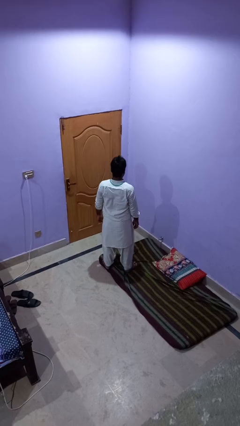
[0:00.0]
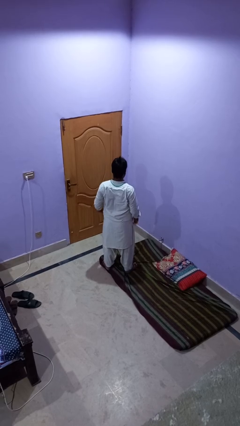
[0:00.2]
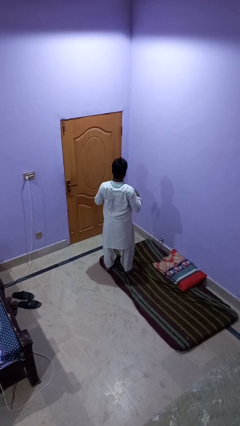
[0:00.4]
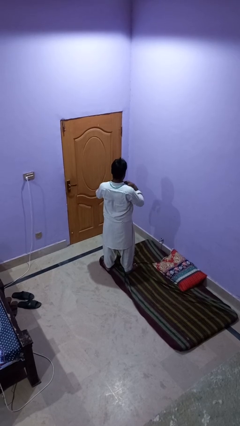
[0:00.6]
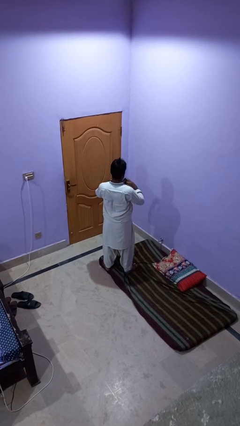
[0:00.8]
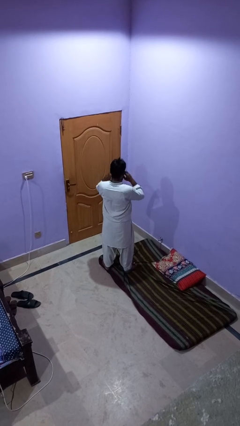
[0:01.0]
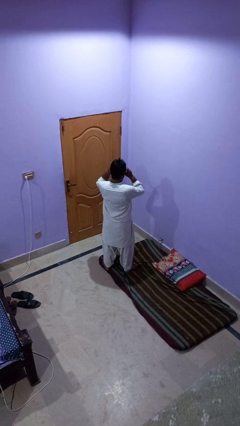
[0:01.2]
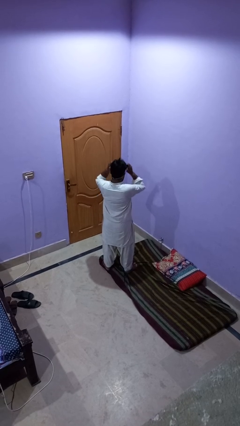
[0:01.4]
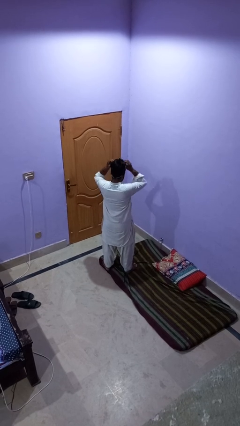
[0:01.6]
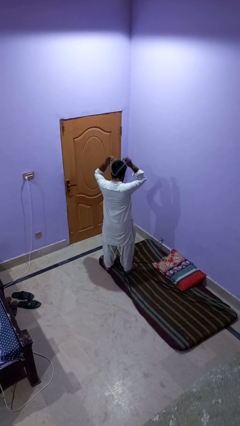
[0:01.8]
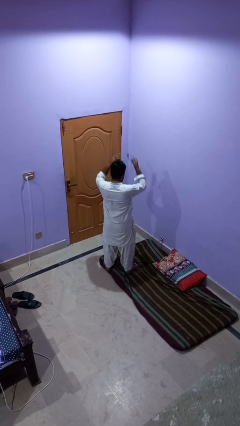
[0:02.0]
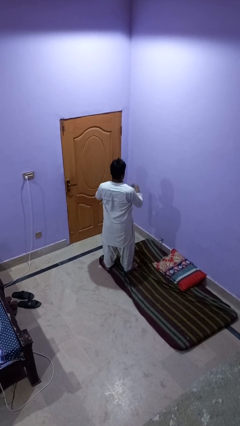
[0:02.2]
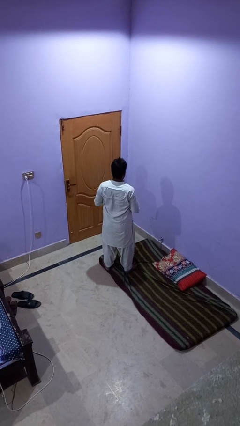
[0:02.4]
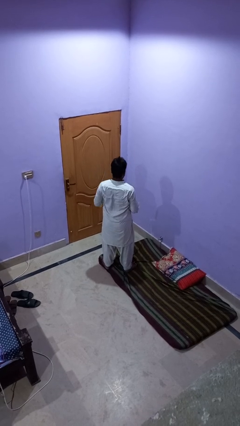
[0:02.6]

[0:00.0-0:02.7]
person takes off necklace

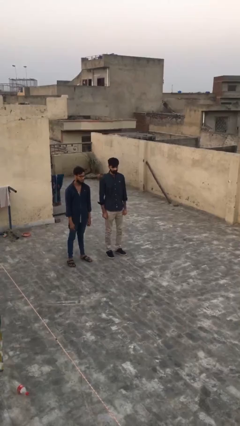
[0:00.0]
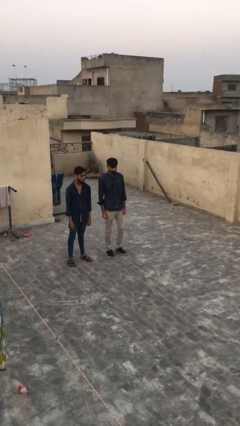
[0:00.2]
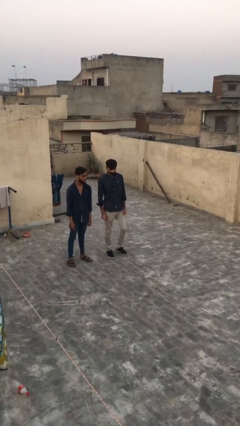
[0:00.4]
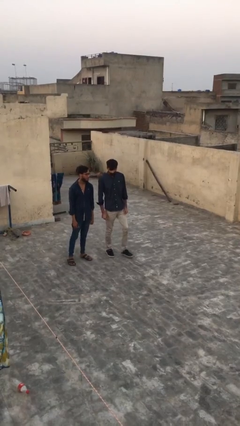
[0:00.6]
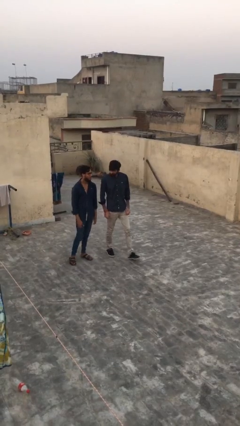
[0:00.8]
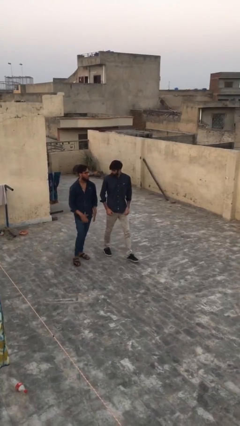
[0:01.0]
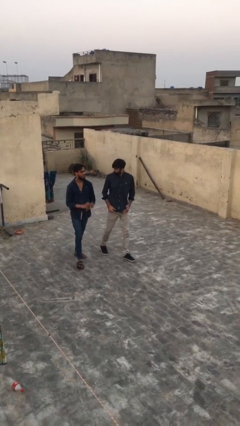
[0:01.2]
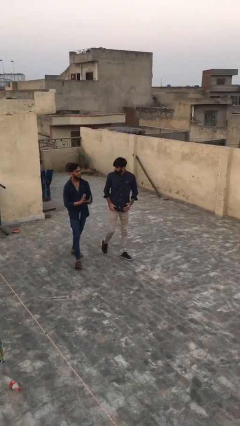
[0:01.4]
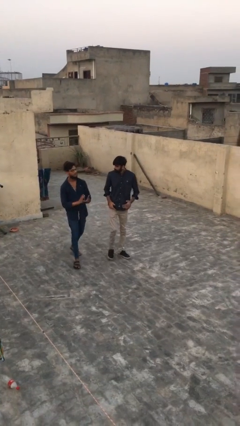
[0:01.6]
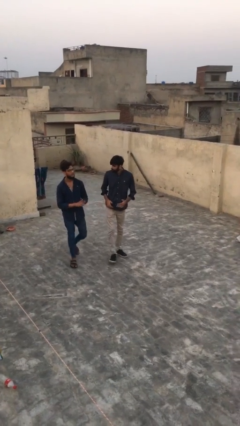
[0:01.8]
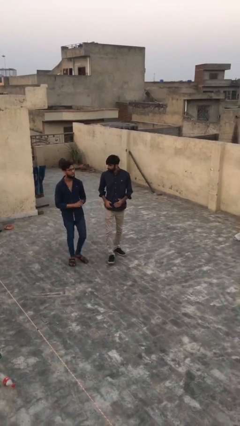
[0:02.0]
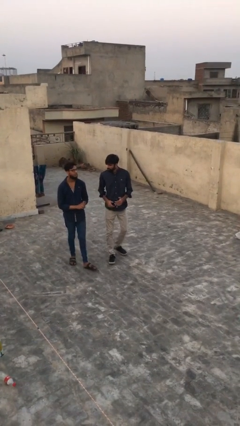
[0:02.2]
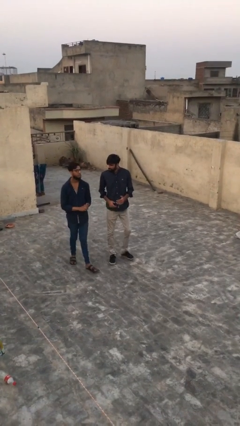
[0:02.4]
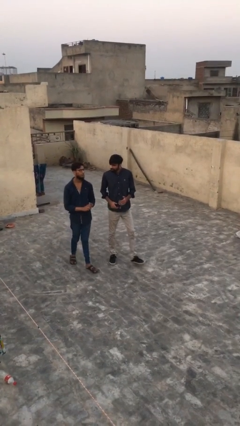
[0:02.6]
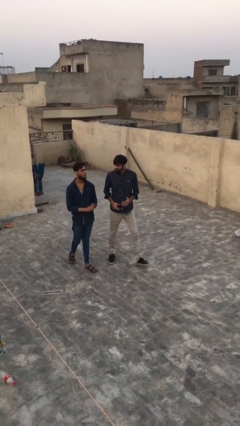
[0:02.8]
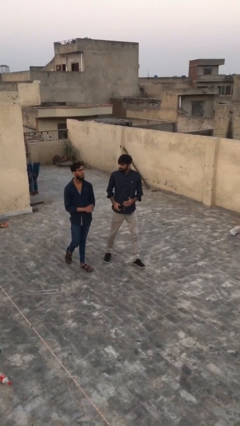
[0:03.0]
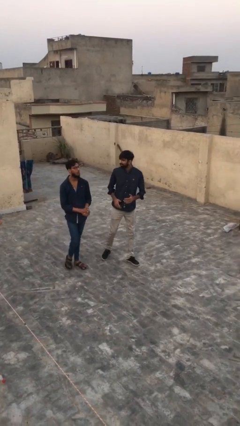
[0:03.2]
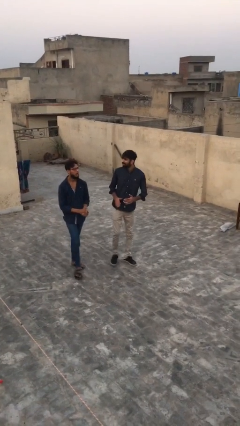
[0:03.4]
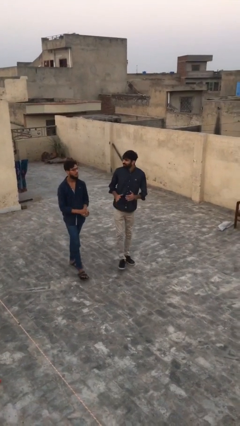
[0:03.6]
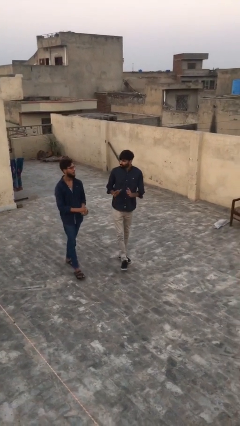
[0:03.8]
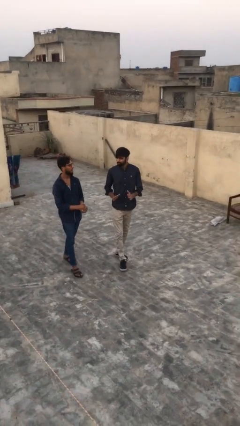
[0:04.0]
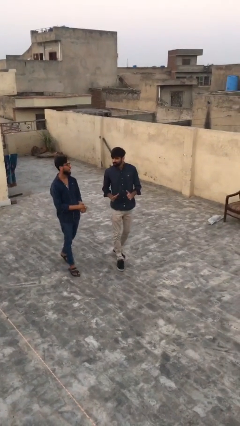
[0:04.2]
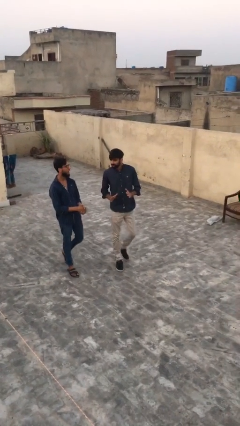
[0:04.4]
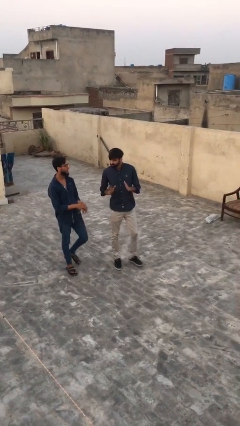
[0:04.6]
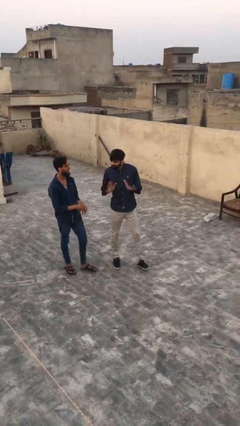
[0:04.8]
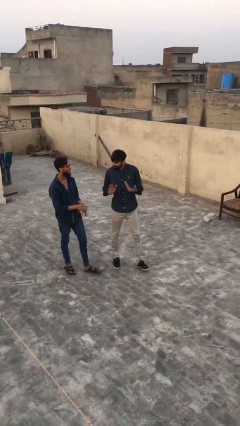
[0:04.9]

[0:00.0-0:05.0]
person talks to person

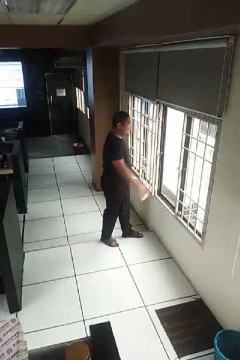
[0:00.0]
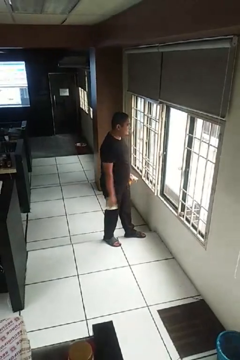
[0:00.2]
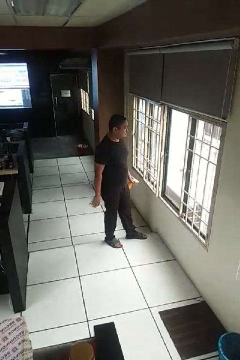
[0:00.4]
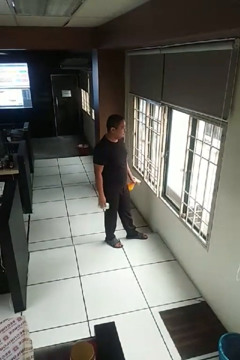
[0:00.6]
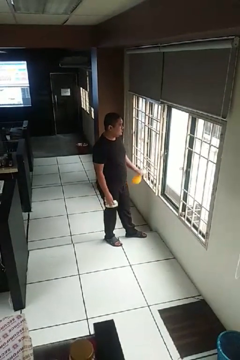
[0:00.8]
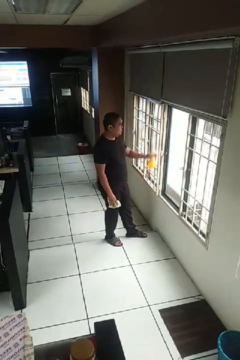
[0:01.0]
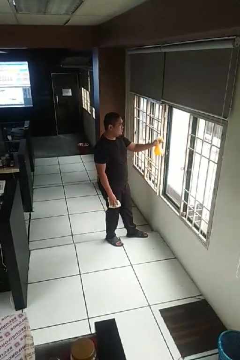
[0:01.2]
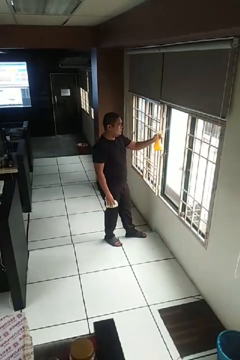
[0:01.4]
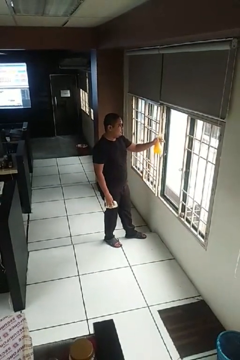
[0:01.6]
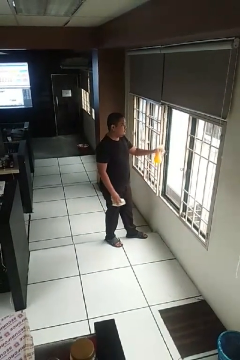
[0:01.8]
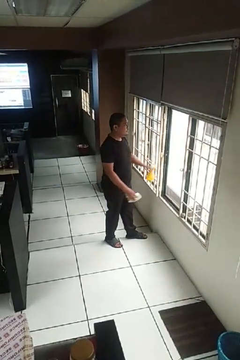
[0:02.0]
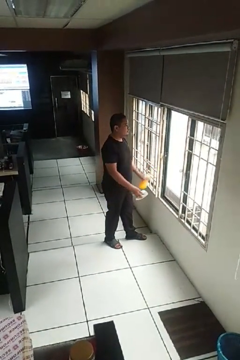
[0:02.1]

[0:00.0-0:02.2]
person sprays from bottle

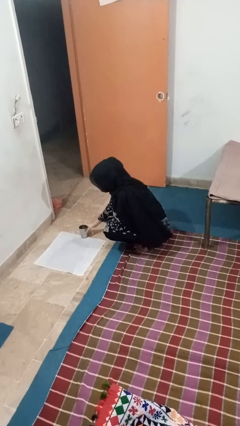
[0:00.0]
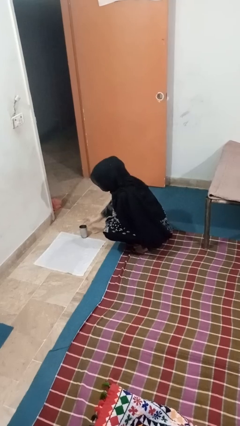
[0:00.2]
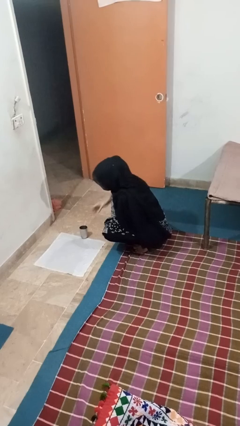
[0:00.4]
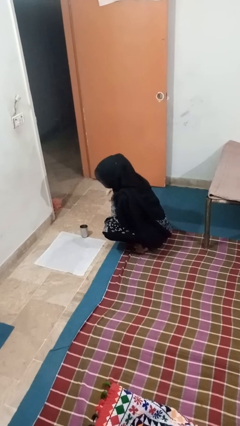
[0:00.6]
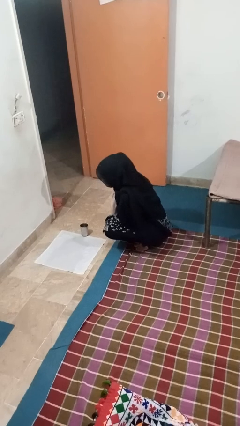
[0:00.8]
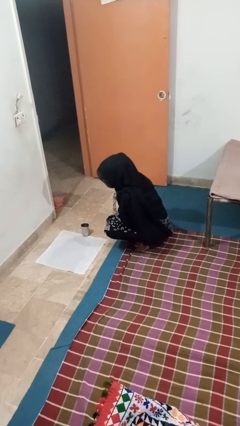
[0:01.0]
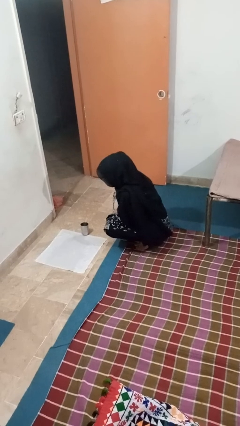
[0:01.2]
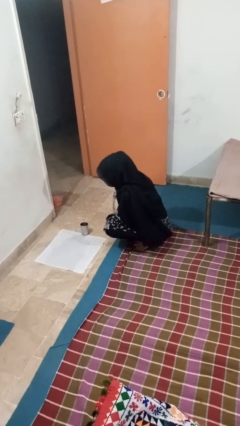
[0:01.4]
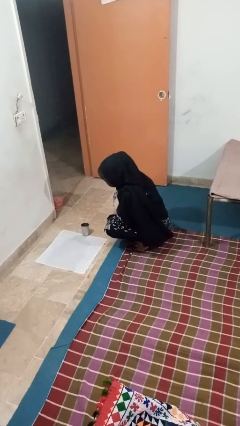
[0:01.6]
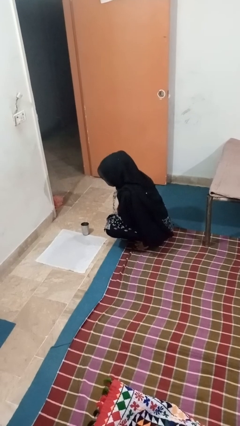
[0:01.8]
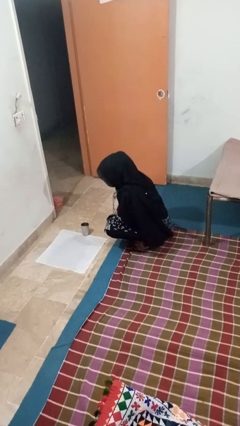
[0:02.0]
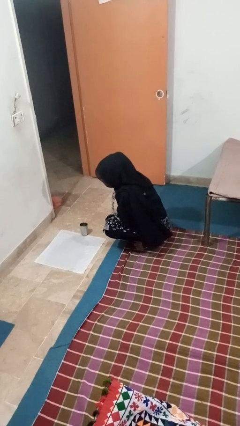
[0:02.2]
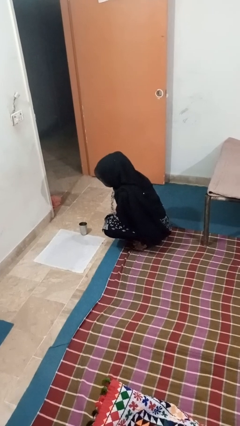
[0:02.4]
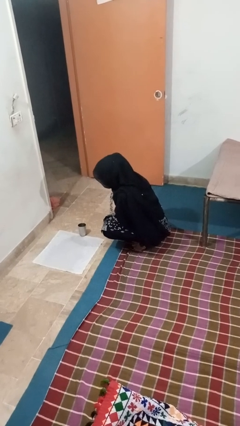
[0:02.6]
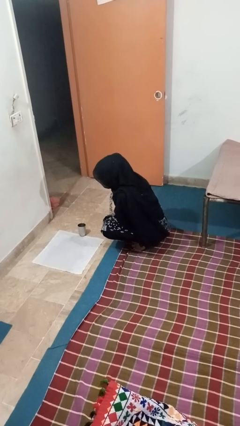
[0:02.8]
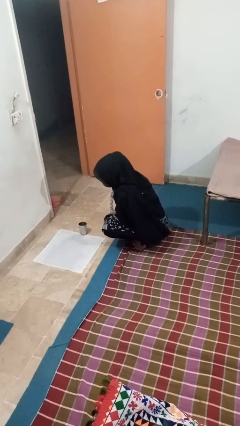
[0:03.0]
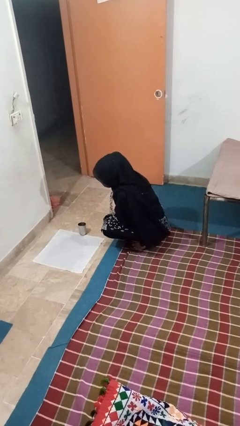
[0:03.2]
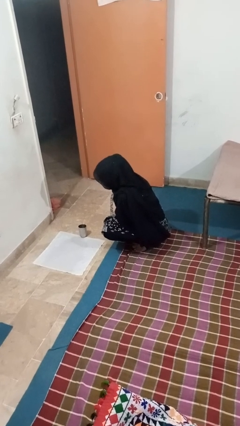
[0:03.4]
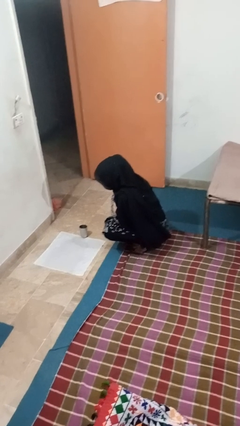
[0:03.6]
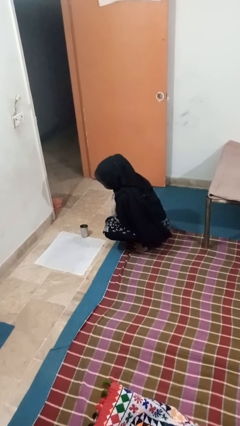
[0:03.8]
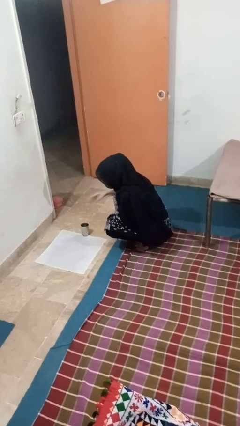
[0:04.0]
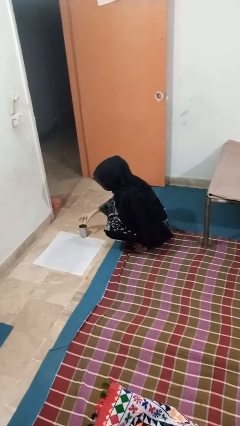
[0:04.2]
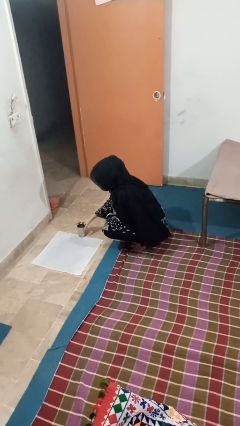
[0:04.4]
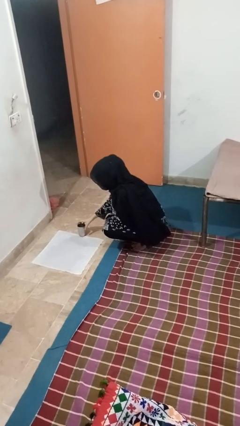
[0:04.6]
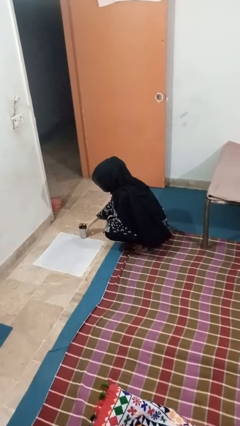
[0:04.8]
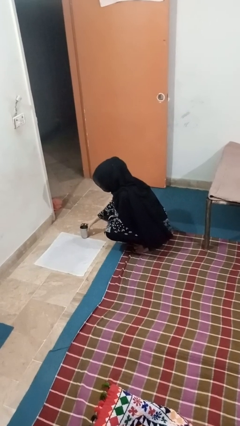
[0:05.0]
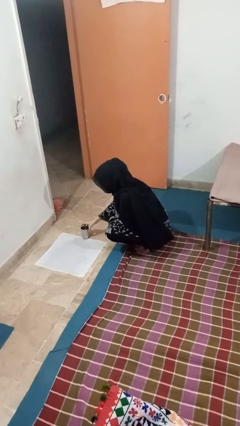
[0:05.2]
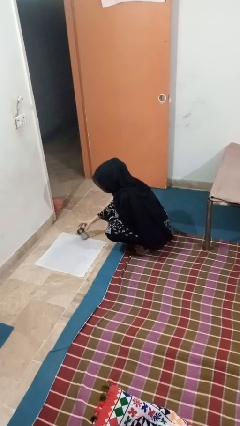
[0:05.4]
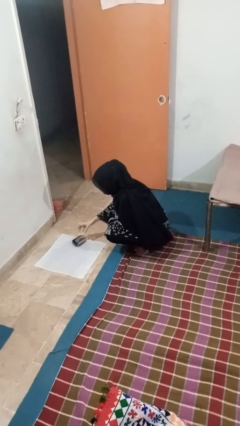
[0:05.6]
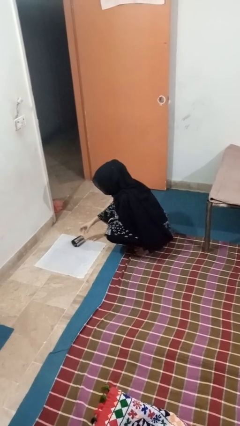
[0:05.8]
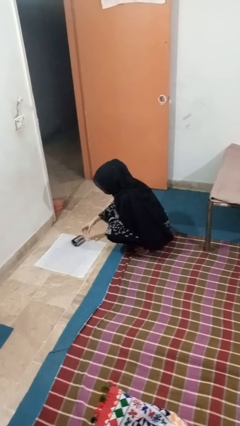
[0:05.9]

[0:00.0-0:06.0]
person sets upright glass

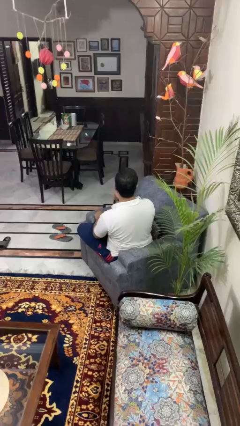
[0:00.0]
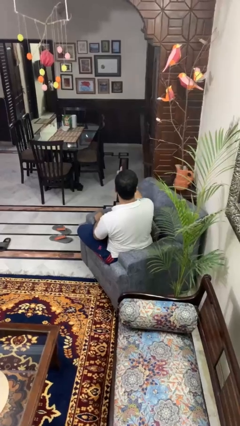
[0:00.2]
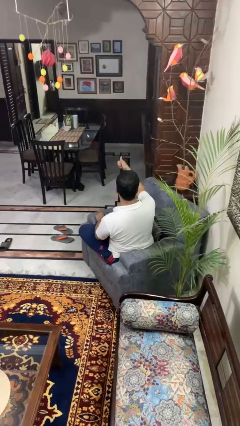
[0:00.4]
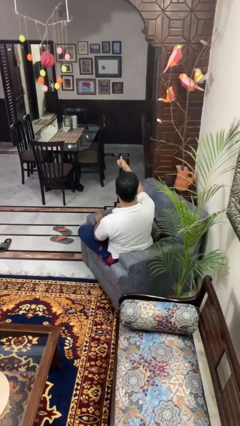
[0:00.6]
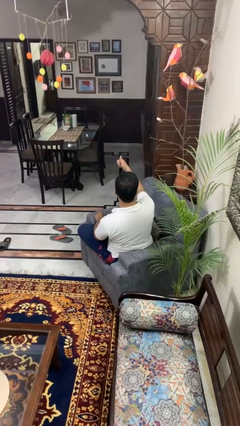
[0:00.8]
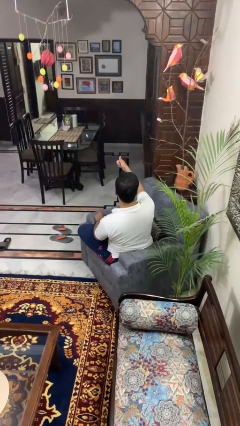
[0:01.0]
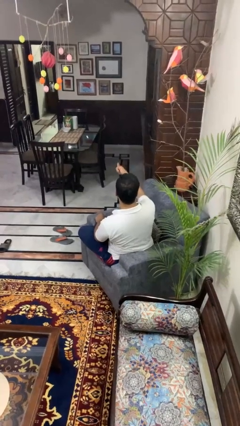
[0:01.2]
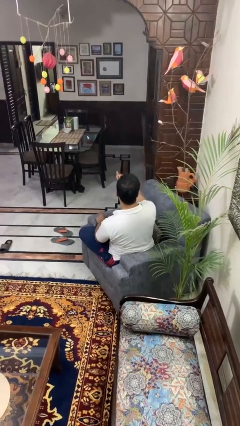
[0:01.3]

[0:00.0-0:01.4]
person gestures thumbs up

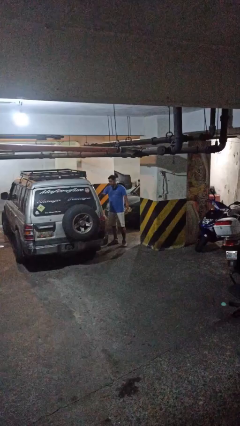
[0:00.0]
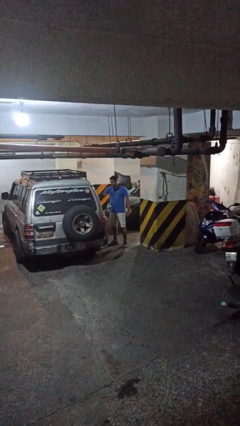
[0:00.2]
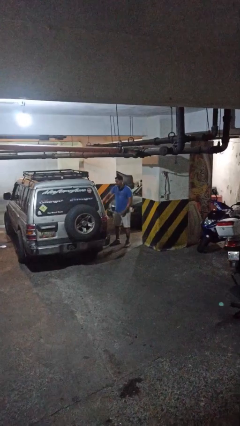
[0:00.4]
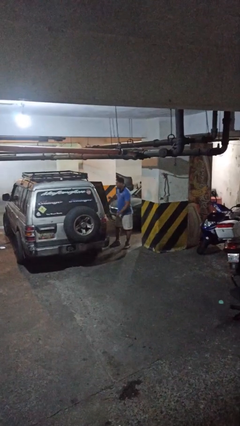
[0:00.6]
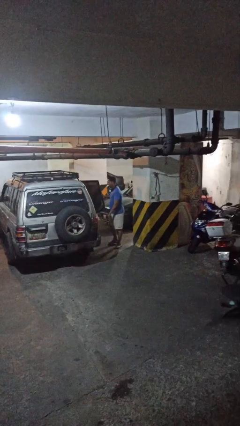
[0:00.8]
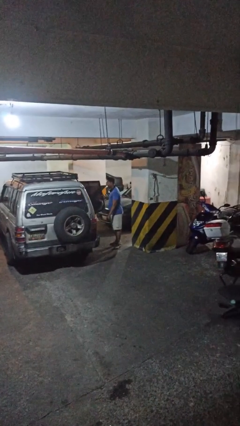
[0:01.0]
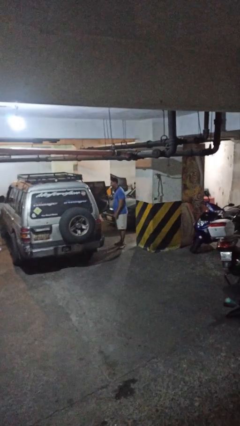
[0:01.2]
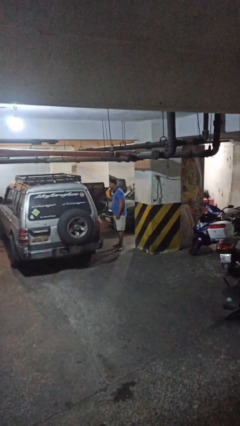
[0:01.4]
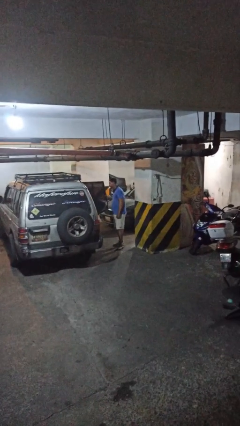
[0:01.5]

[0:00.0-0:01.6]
person opens car door
